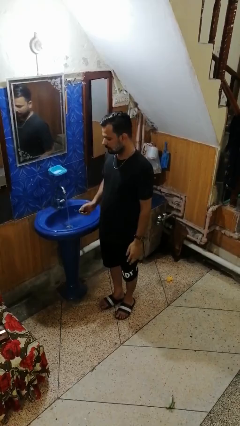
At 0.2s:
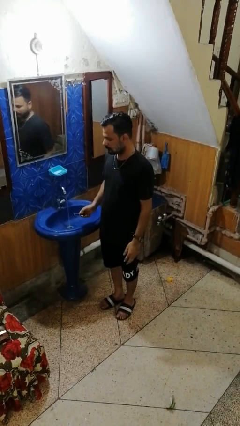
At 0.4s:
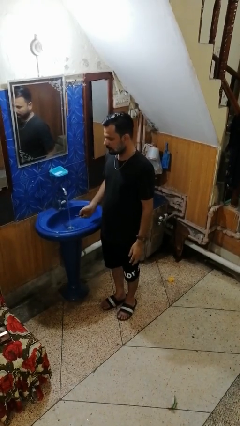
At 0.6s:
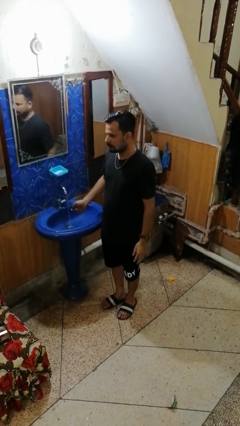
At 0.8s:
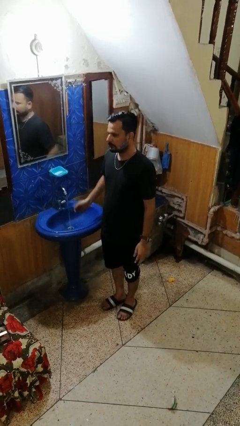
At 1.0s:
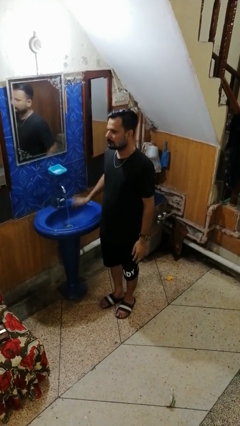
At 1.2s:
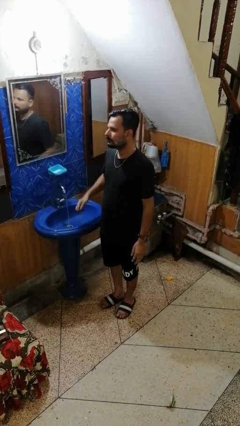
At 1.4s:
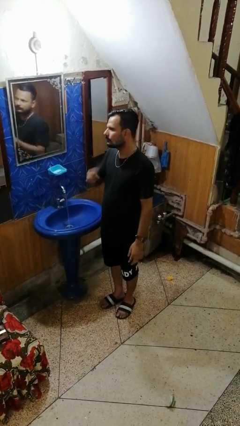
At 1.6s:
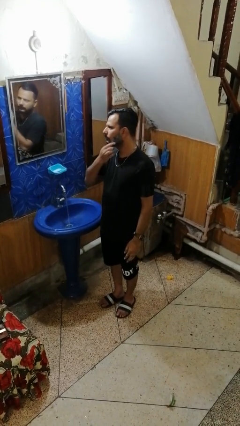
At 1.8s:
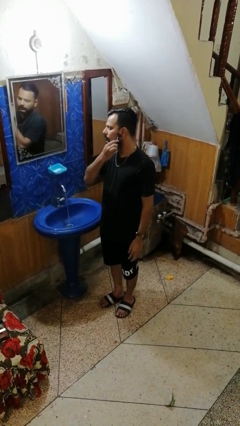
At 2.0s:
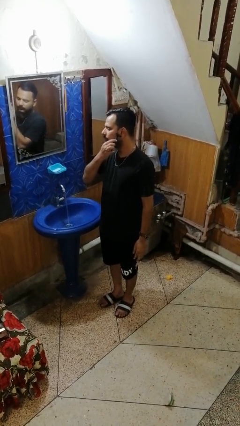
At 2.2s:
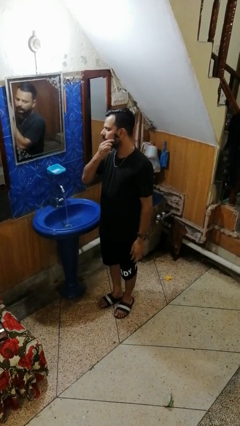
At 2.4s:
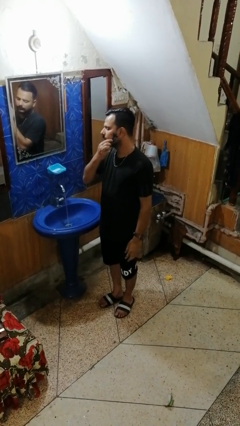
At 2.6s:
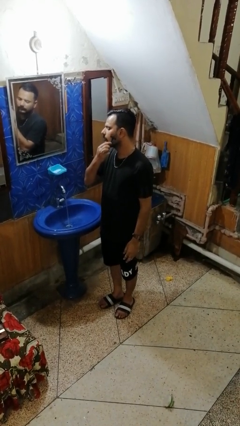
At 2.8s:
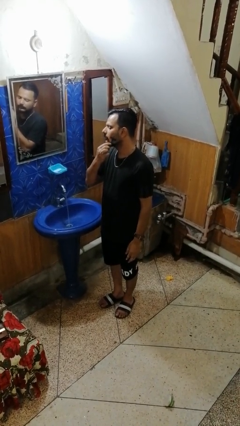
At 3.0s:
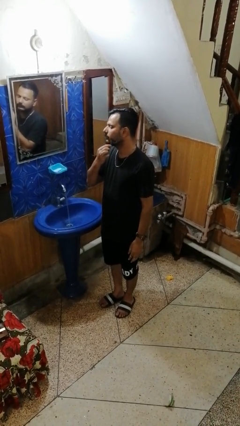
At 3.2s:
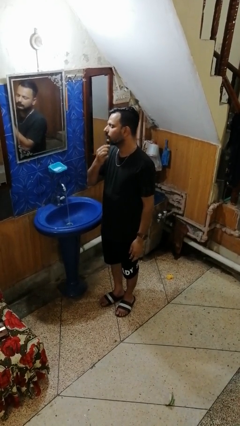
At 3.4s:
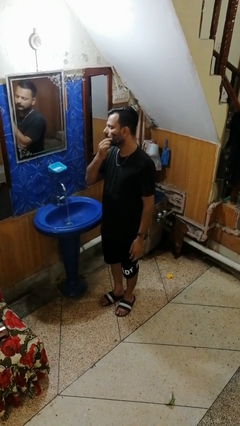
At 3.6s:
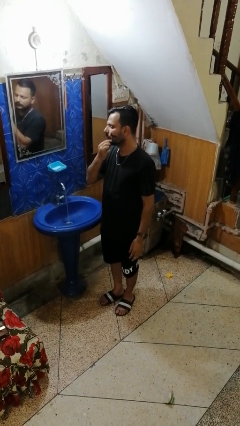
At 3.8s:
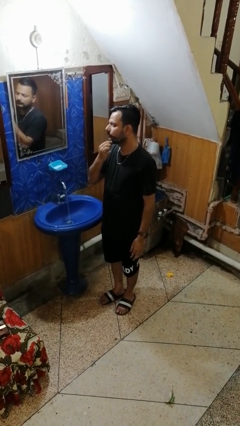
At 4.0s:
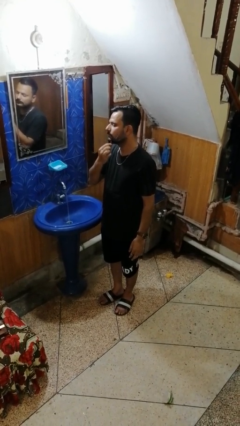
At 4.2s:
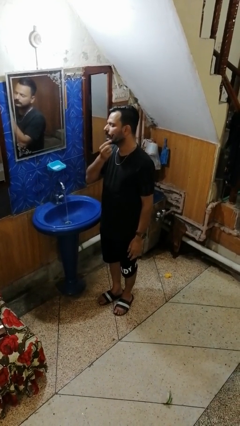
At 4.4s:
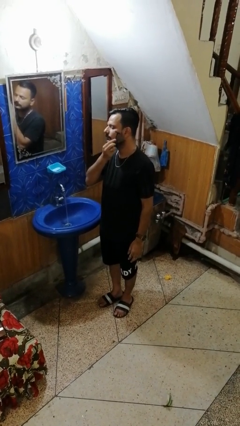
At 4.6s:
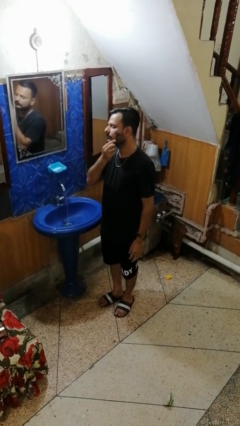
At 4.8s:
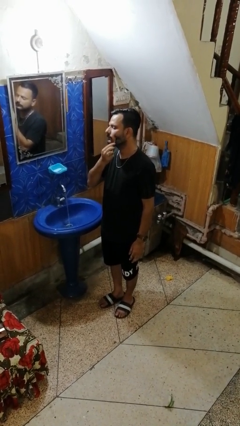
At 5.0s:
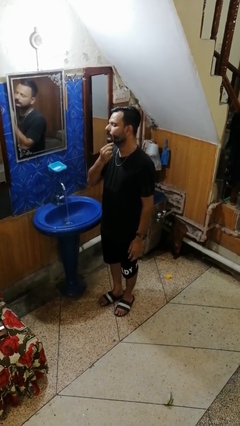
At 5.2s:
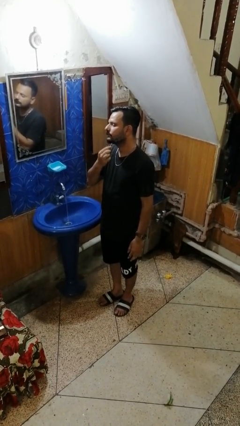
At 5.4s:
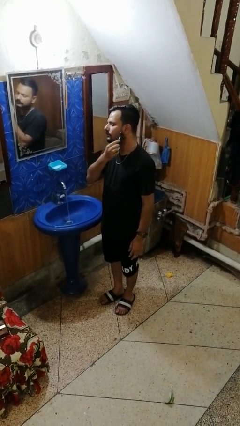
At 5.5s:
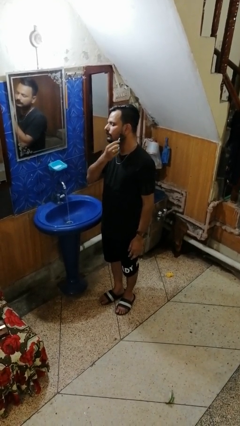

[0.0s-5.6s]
person shaves face

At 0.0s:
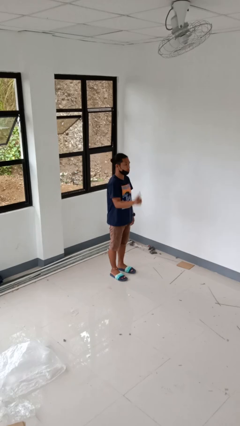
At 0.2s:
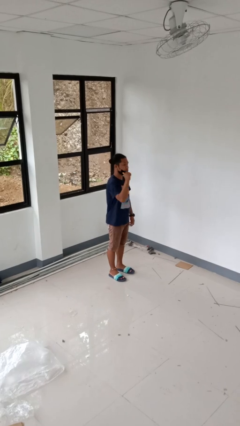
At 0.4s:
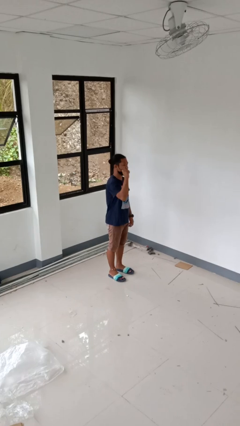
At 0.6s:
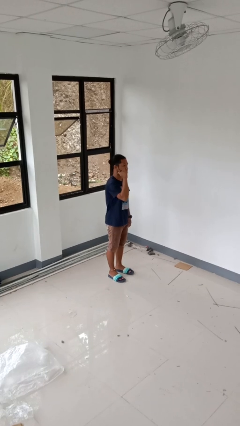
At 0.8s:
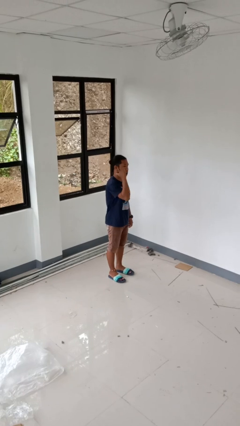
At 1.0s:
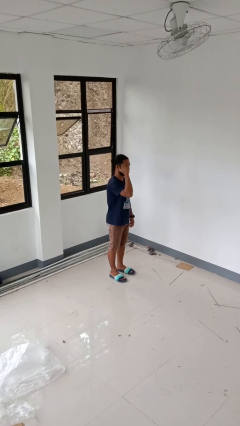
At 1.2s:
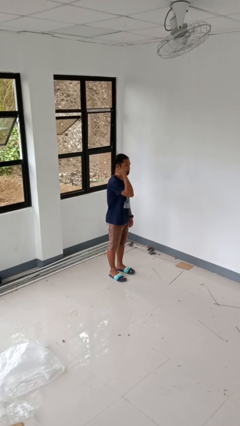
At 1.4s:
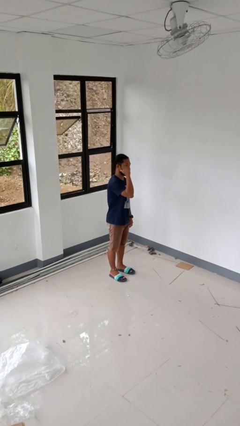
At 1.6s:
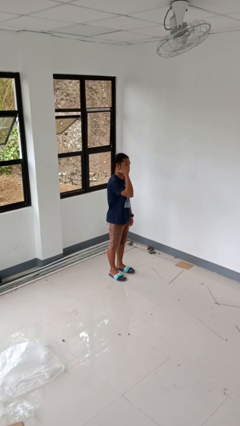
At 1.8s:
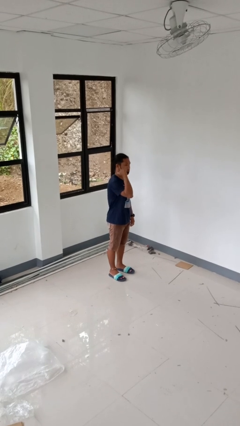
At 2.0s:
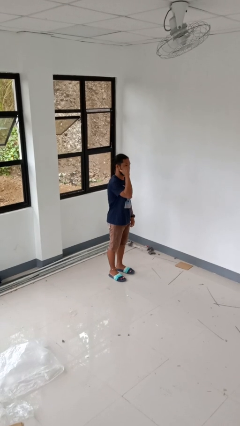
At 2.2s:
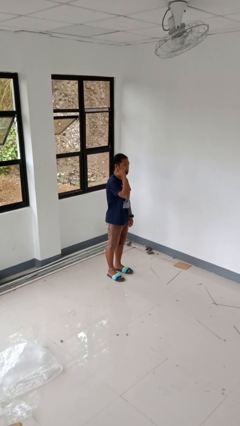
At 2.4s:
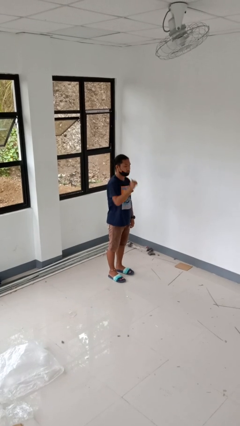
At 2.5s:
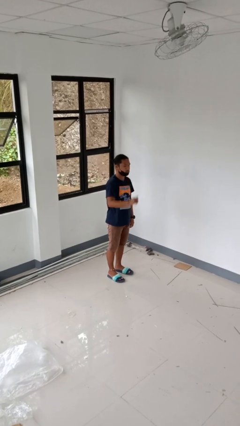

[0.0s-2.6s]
person gestures behind me

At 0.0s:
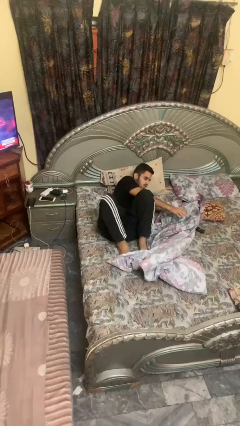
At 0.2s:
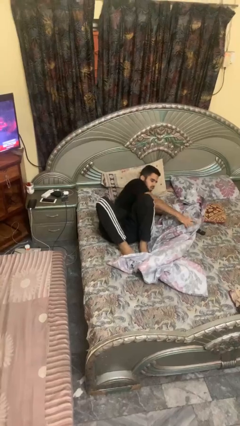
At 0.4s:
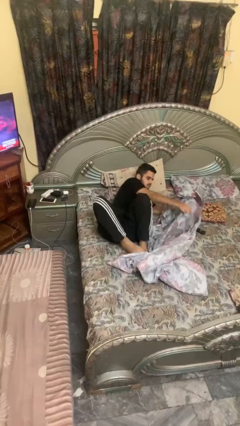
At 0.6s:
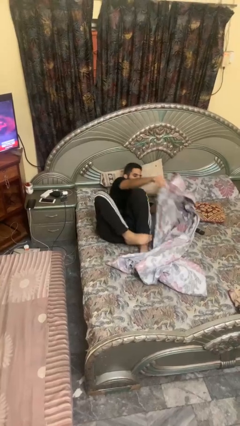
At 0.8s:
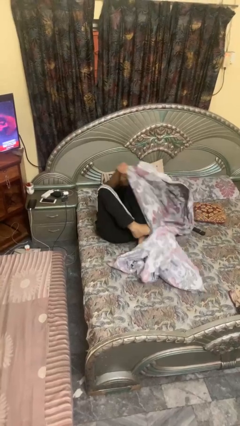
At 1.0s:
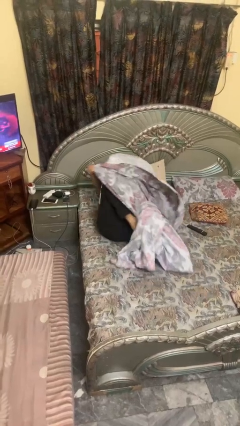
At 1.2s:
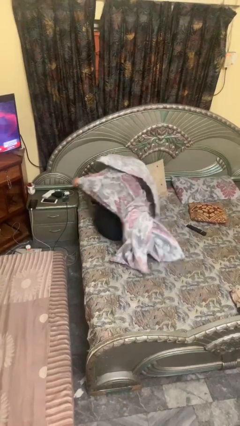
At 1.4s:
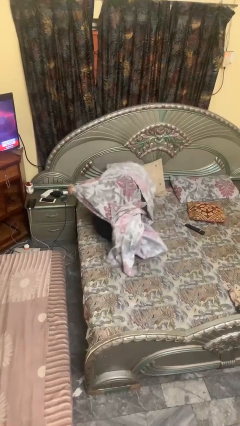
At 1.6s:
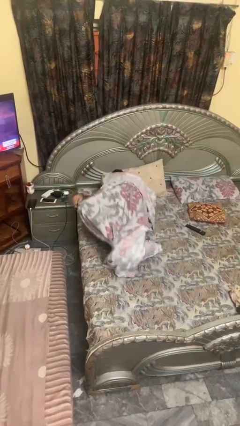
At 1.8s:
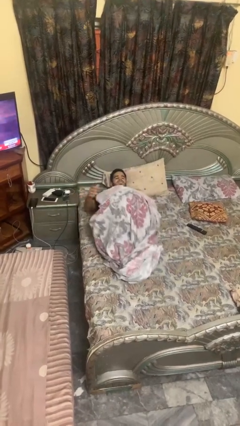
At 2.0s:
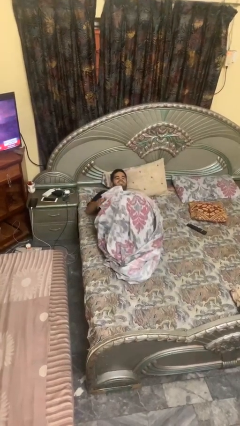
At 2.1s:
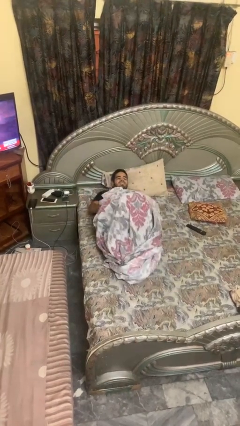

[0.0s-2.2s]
person covers with bedsheets

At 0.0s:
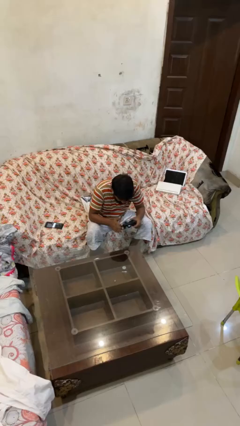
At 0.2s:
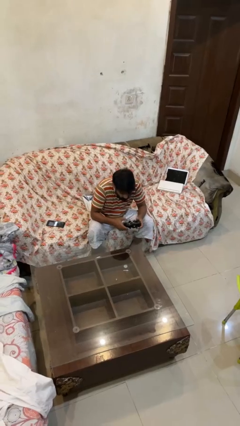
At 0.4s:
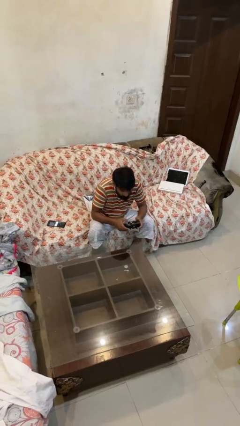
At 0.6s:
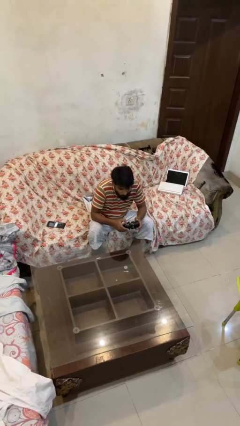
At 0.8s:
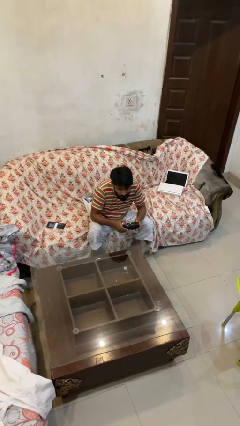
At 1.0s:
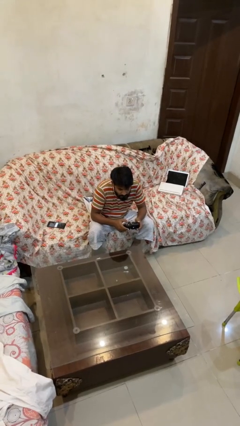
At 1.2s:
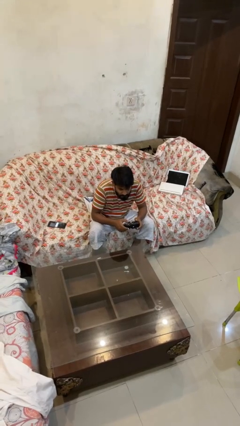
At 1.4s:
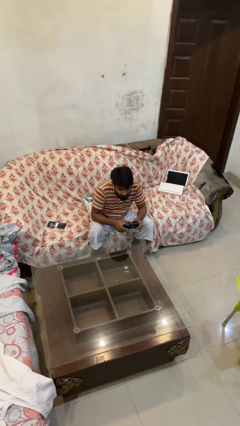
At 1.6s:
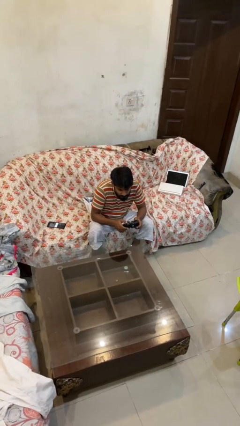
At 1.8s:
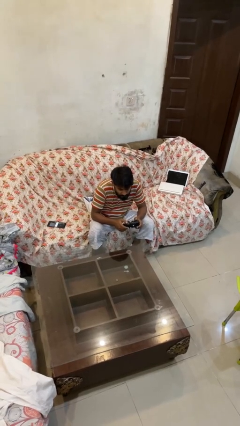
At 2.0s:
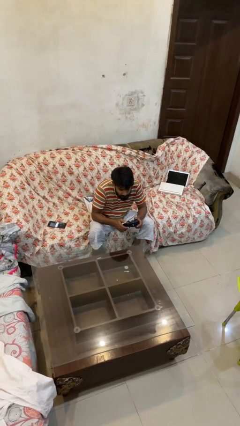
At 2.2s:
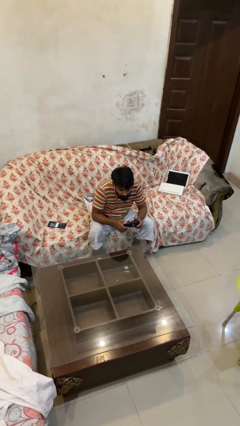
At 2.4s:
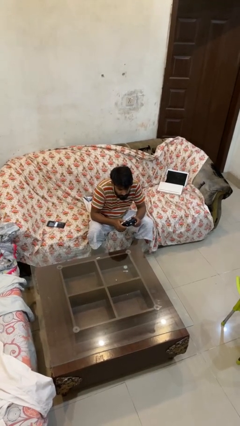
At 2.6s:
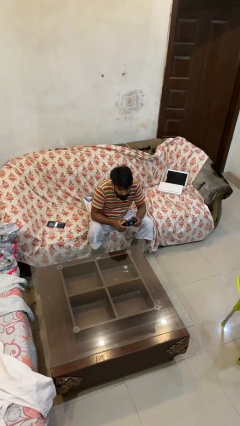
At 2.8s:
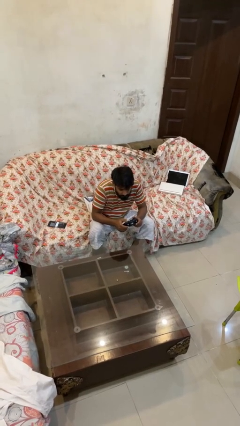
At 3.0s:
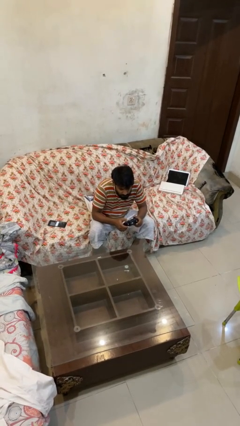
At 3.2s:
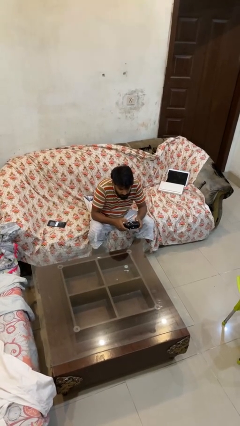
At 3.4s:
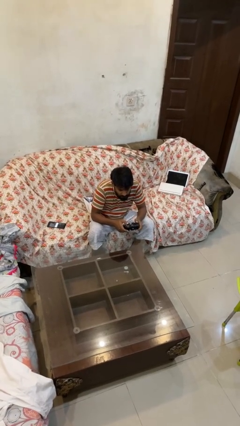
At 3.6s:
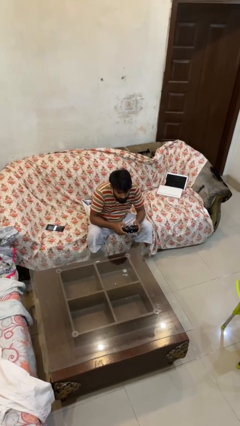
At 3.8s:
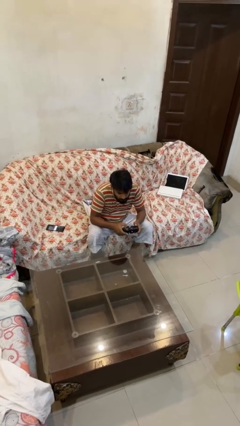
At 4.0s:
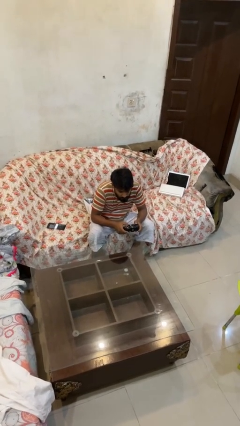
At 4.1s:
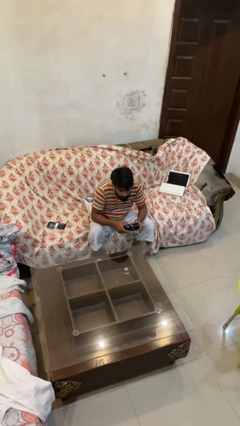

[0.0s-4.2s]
person interacts with handheld game

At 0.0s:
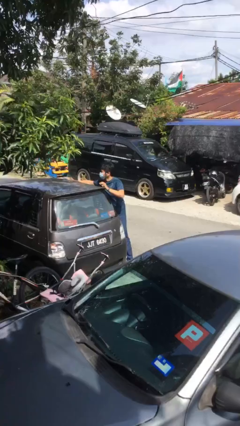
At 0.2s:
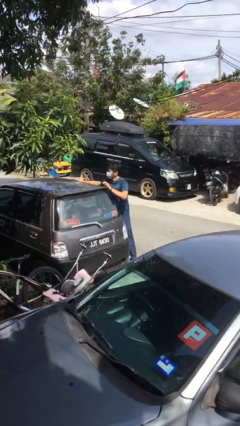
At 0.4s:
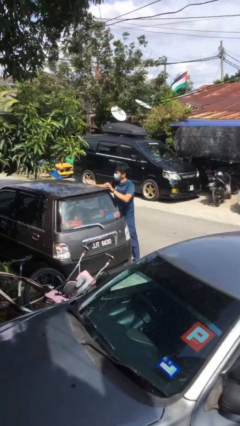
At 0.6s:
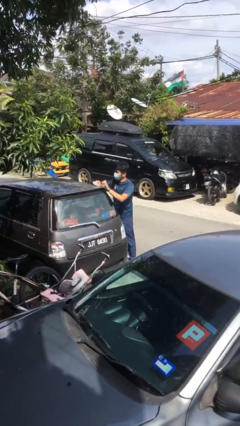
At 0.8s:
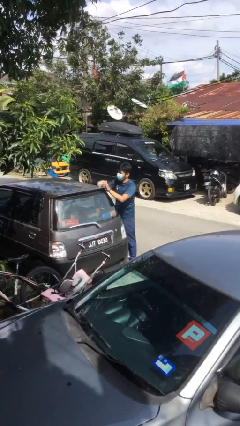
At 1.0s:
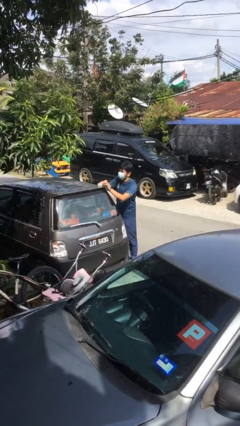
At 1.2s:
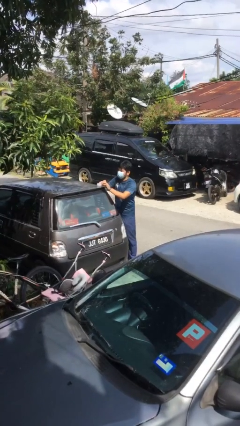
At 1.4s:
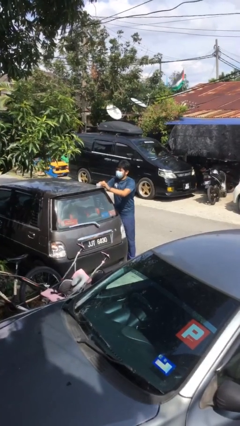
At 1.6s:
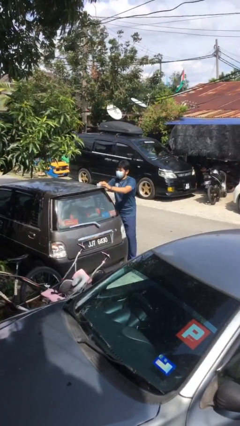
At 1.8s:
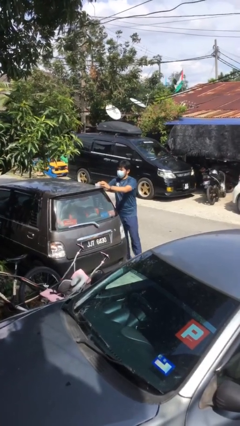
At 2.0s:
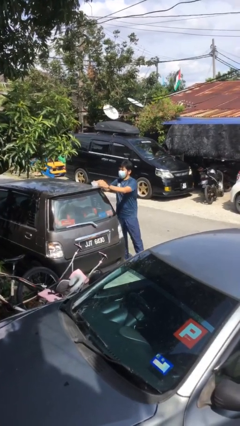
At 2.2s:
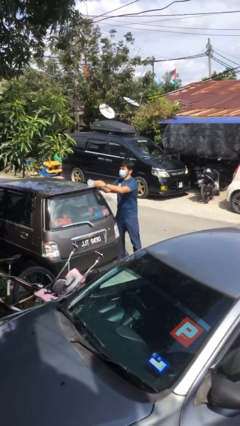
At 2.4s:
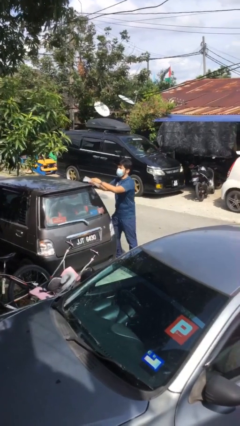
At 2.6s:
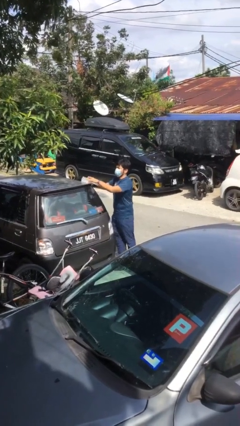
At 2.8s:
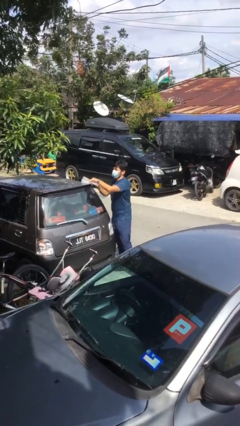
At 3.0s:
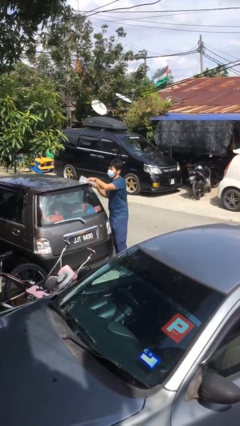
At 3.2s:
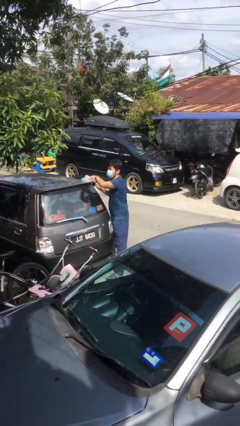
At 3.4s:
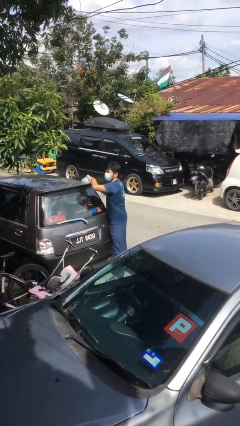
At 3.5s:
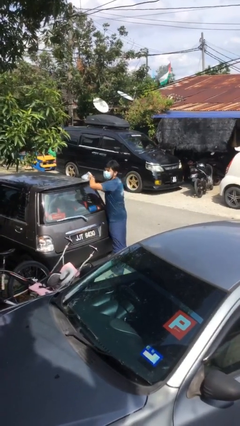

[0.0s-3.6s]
person polishes car with rag
